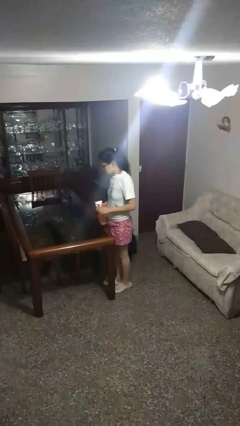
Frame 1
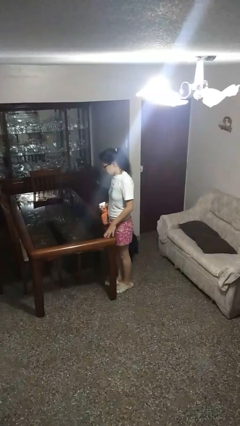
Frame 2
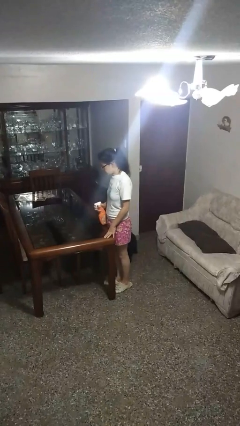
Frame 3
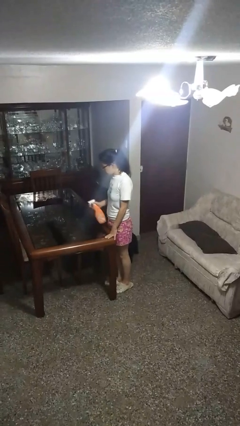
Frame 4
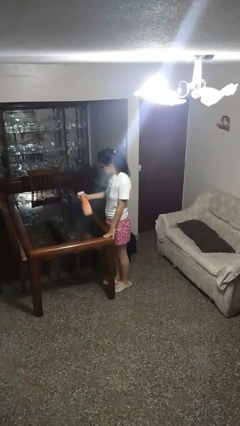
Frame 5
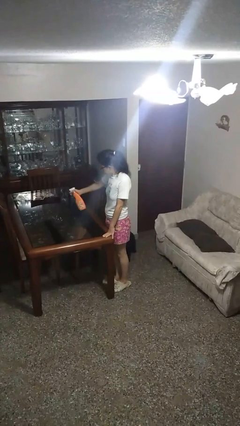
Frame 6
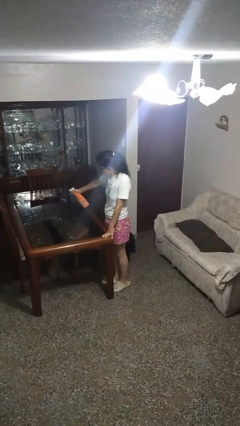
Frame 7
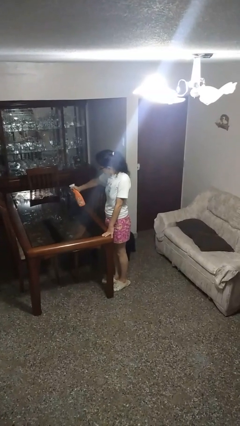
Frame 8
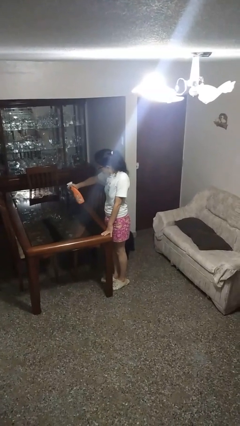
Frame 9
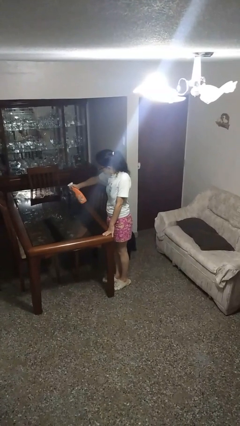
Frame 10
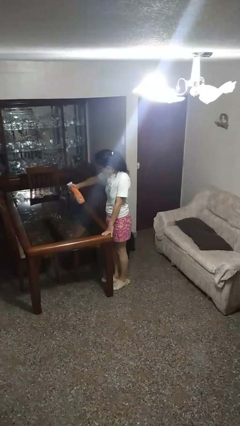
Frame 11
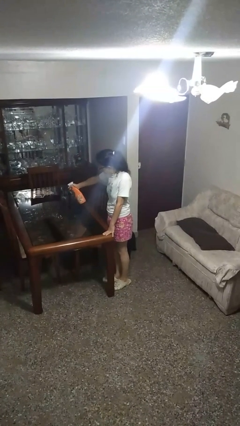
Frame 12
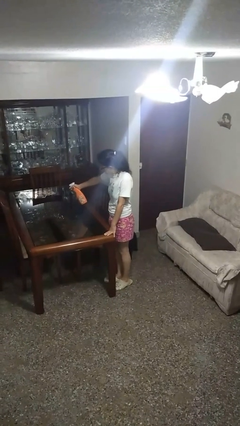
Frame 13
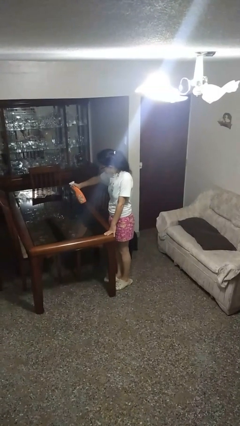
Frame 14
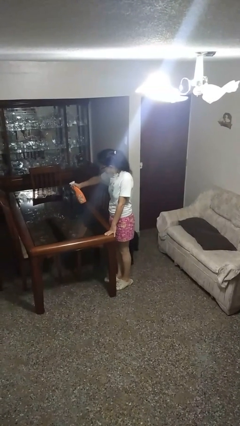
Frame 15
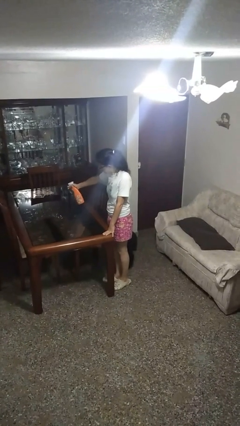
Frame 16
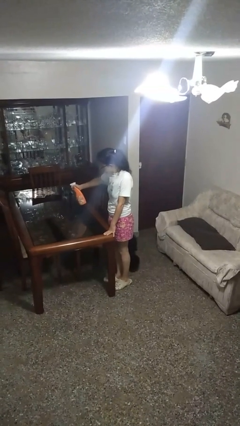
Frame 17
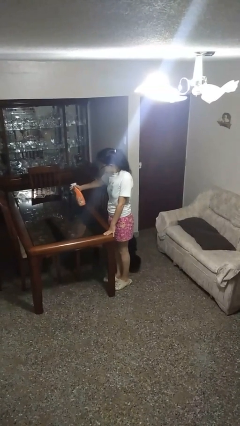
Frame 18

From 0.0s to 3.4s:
person sprays from bottle

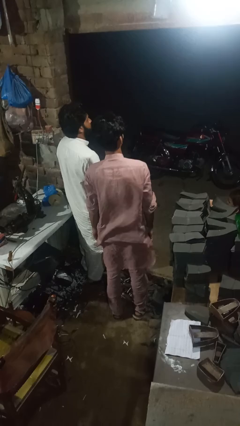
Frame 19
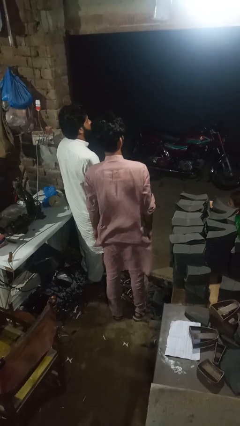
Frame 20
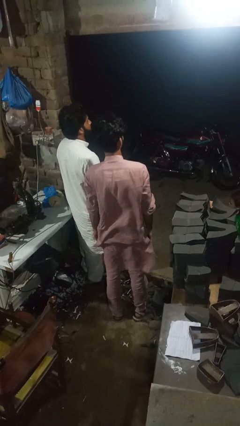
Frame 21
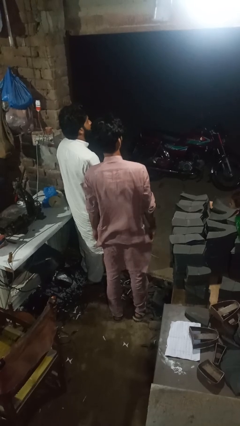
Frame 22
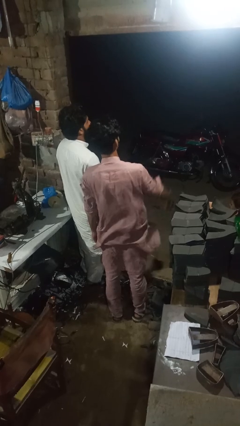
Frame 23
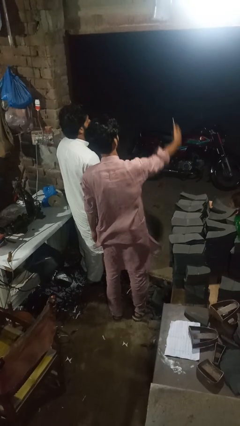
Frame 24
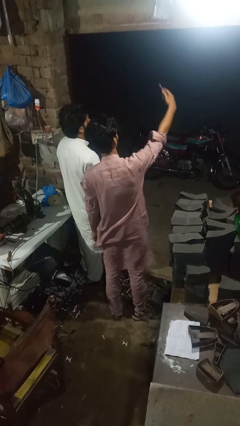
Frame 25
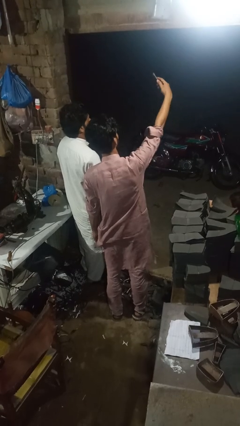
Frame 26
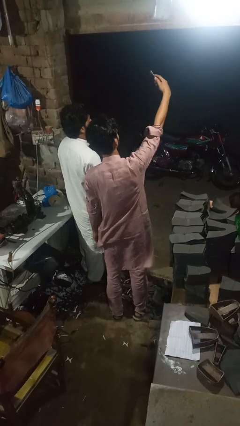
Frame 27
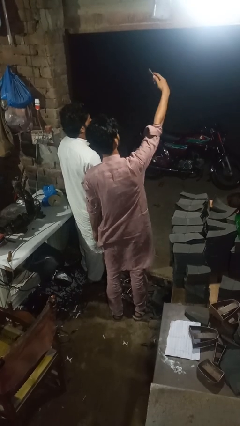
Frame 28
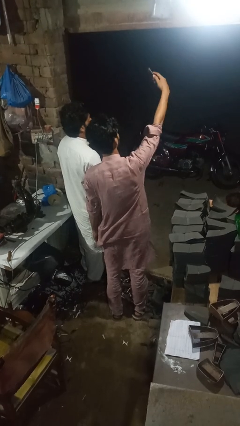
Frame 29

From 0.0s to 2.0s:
person takes selfie with person

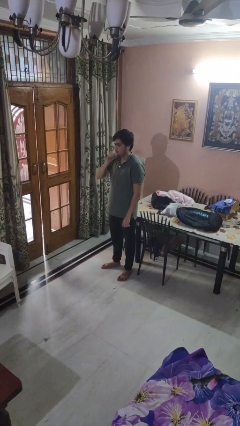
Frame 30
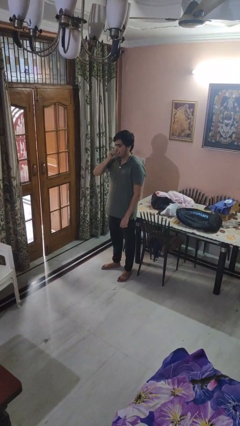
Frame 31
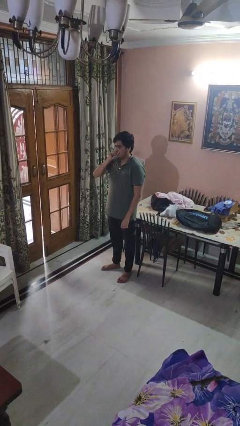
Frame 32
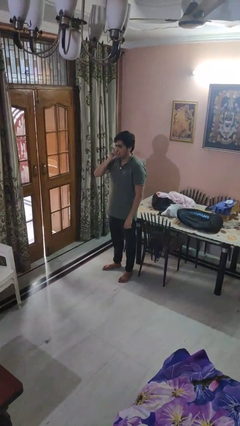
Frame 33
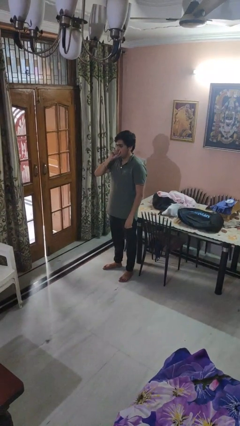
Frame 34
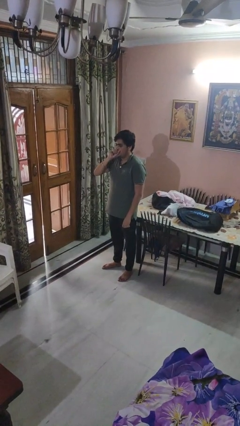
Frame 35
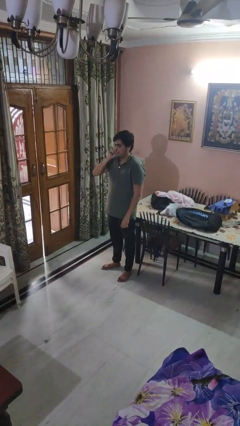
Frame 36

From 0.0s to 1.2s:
person vapes

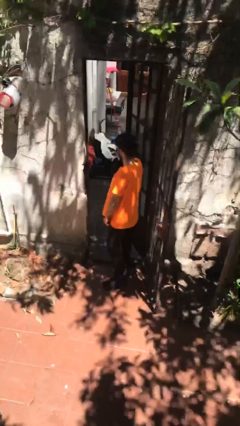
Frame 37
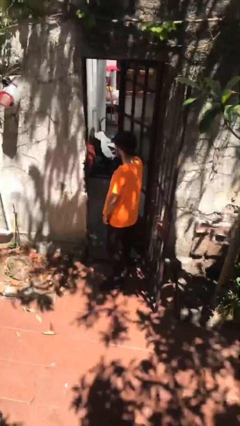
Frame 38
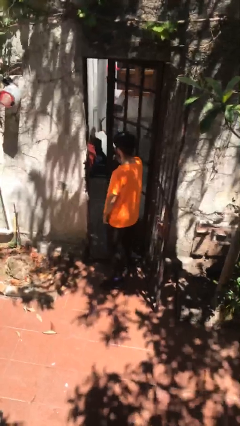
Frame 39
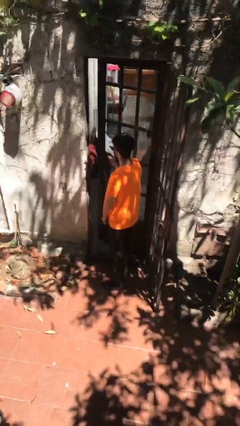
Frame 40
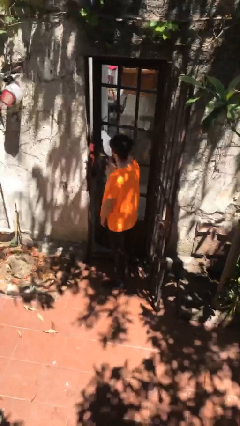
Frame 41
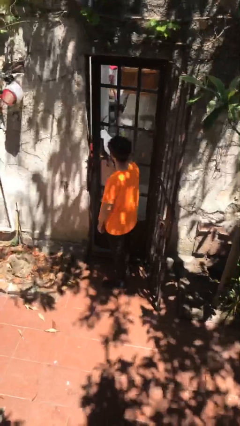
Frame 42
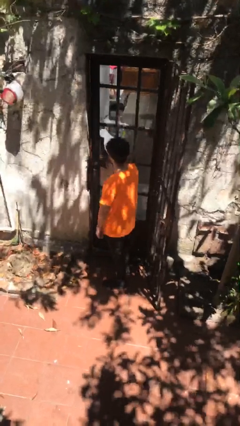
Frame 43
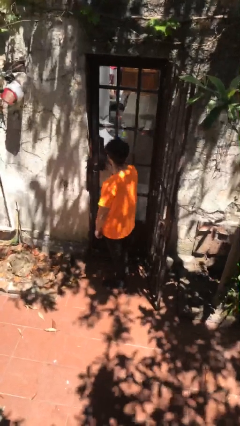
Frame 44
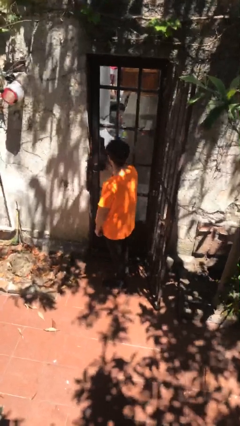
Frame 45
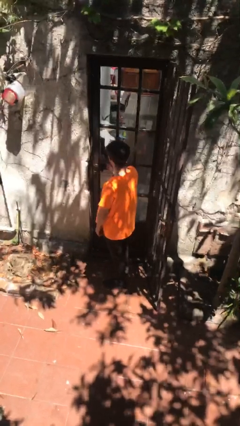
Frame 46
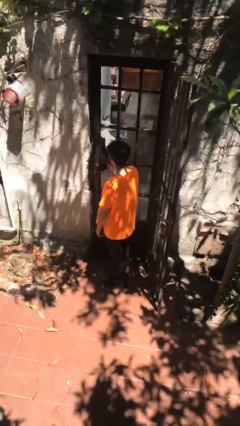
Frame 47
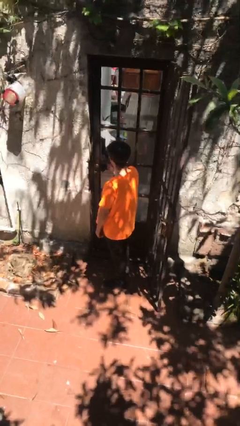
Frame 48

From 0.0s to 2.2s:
person closes facility door

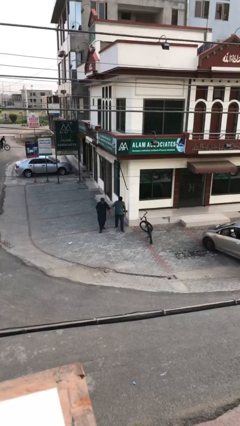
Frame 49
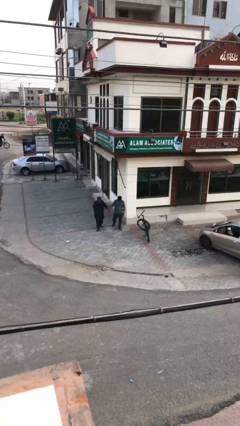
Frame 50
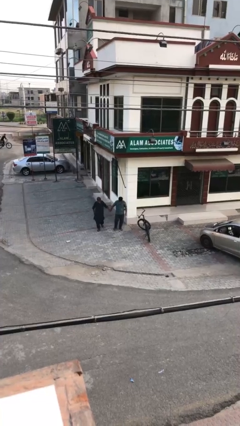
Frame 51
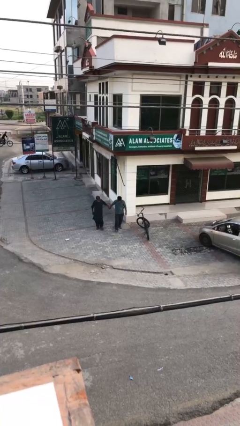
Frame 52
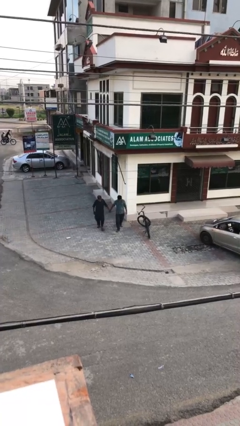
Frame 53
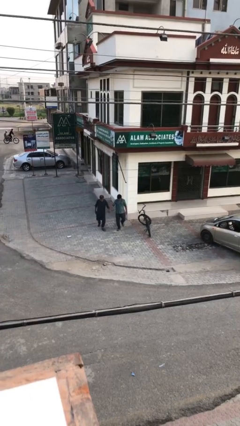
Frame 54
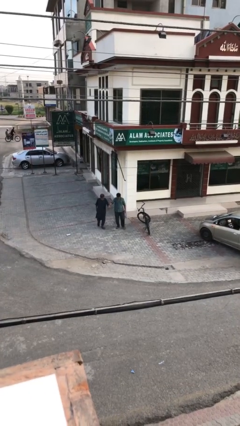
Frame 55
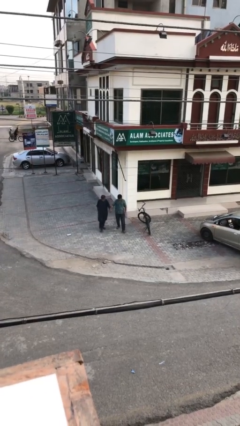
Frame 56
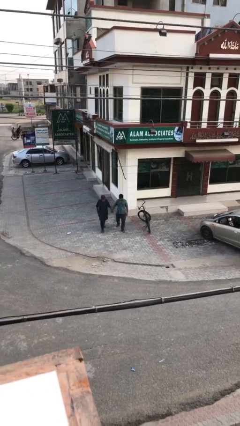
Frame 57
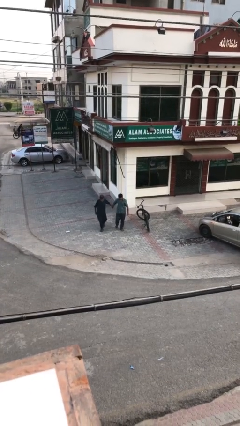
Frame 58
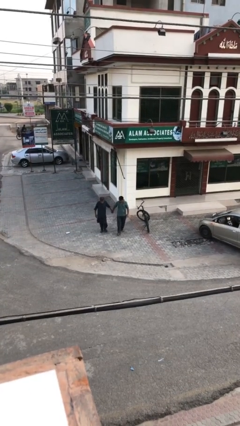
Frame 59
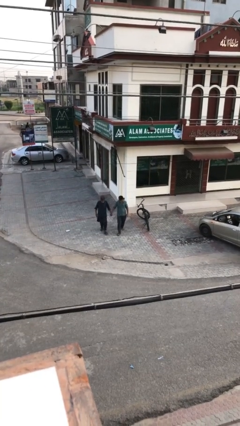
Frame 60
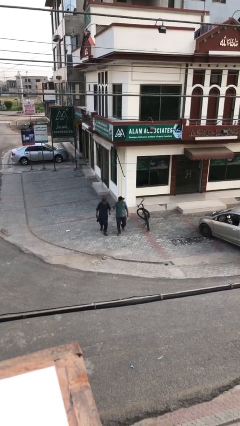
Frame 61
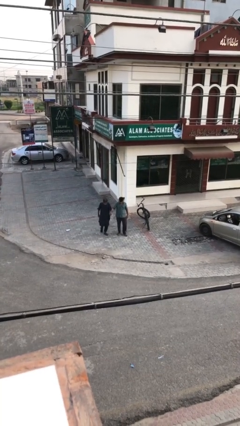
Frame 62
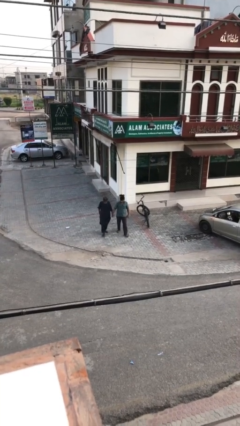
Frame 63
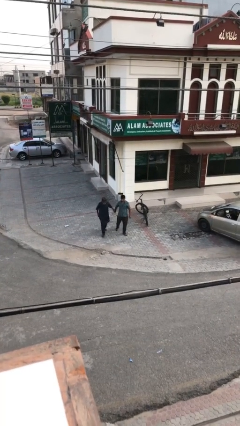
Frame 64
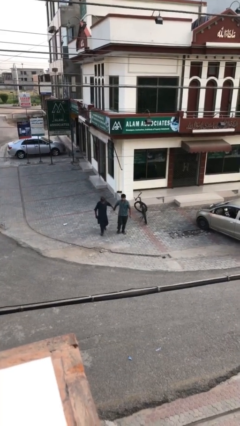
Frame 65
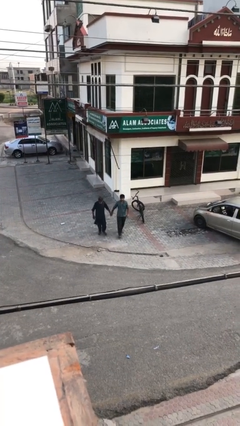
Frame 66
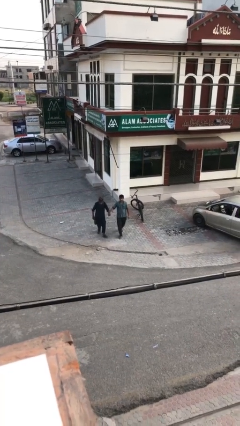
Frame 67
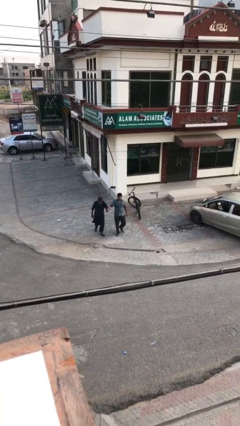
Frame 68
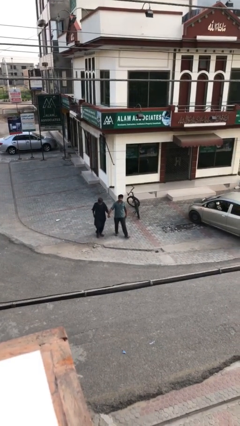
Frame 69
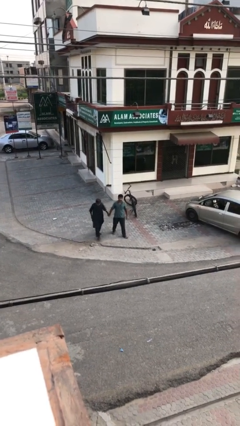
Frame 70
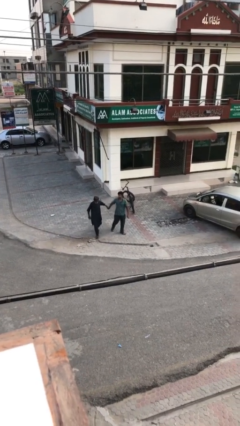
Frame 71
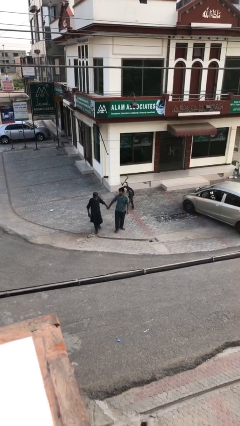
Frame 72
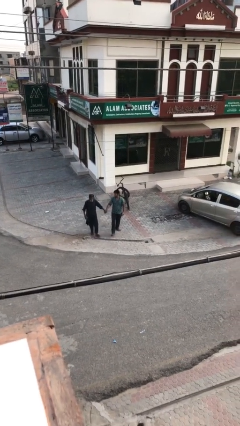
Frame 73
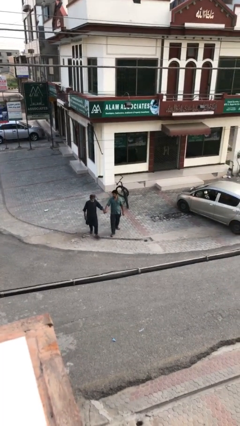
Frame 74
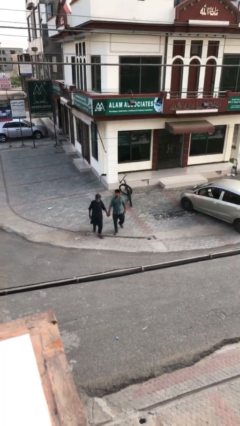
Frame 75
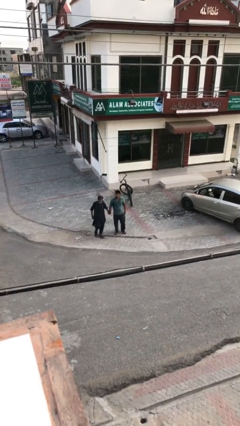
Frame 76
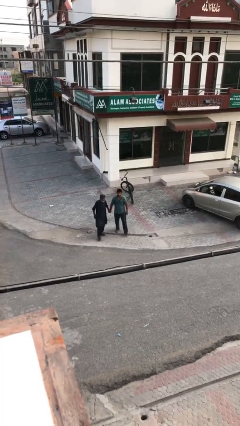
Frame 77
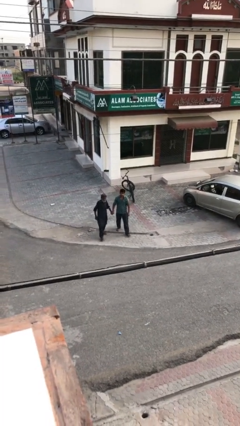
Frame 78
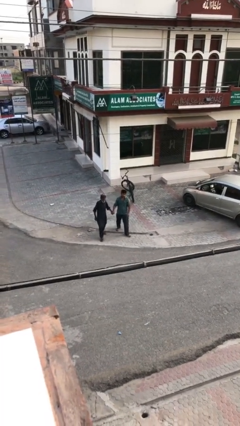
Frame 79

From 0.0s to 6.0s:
person holds hand

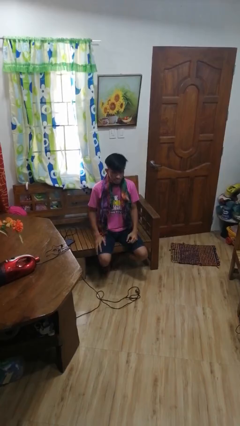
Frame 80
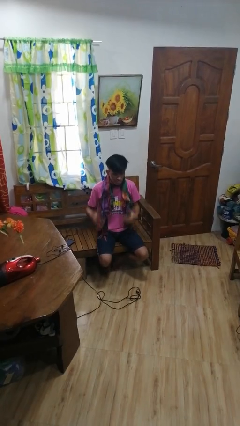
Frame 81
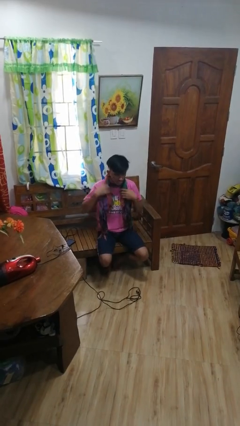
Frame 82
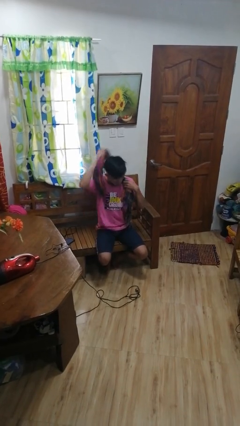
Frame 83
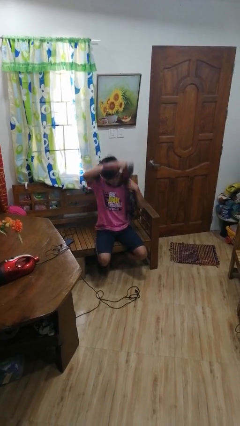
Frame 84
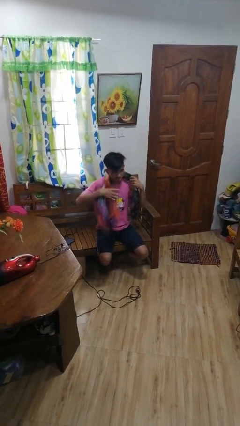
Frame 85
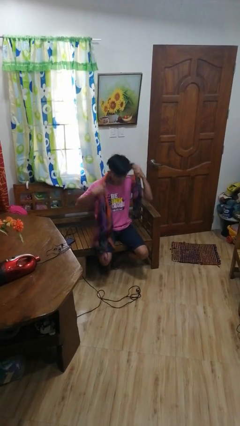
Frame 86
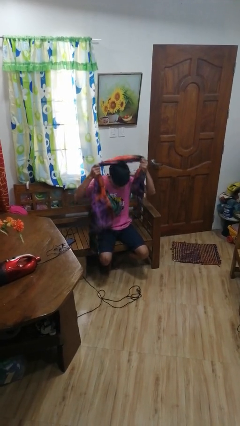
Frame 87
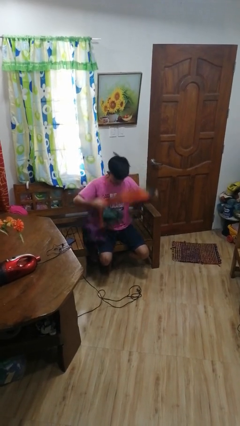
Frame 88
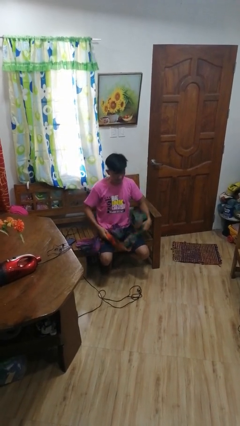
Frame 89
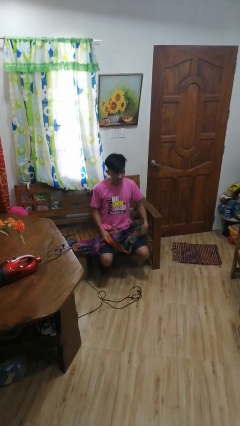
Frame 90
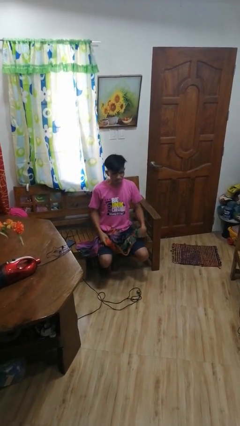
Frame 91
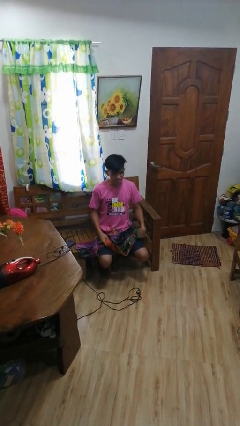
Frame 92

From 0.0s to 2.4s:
person takes off scarf
